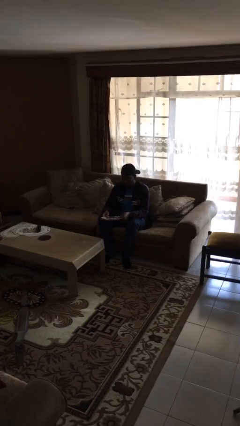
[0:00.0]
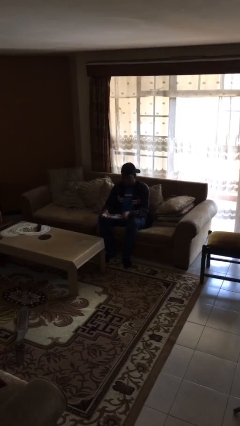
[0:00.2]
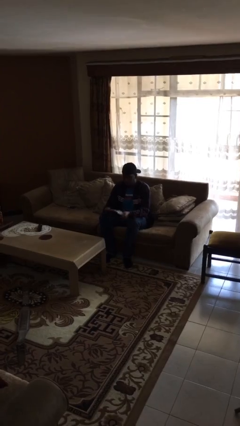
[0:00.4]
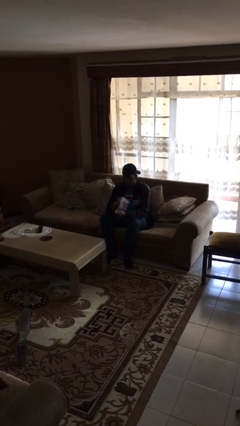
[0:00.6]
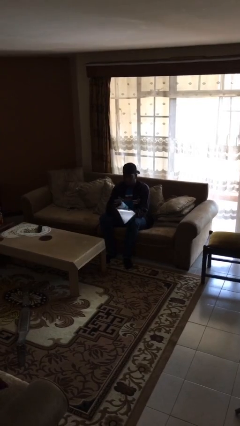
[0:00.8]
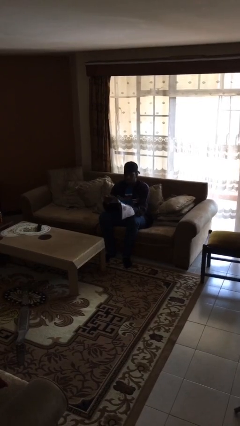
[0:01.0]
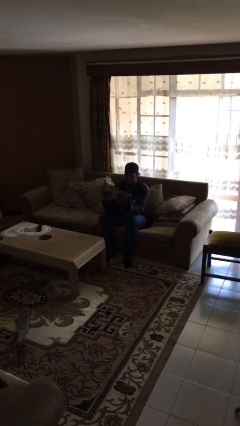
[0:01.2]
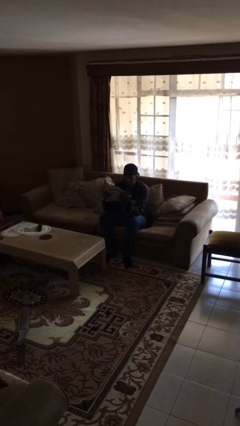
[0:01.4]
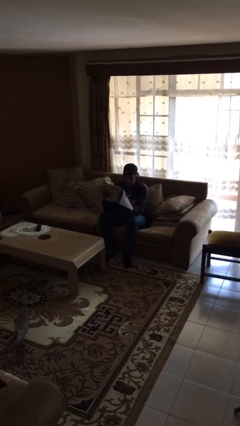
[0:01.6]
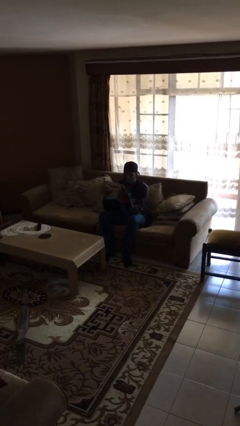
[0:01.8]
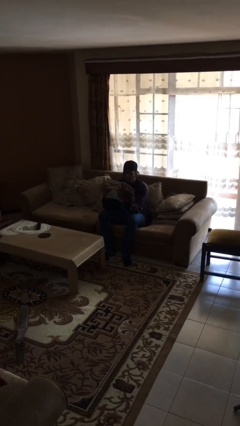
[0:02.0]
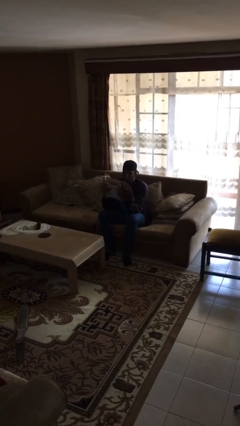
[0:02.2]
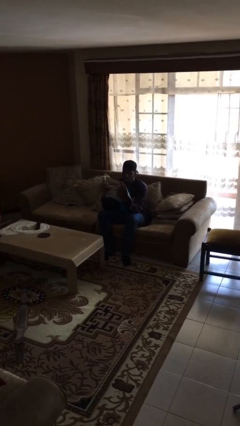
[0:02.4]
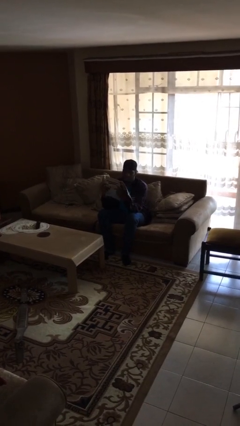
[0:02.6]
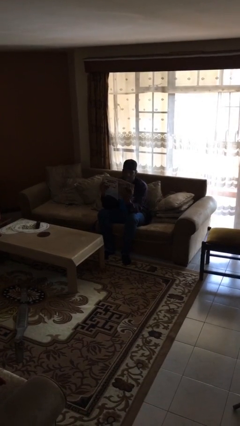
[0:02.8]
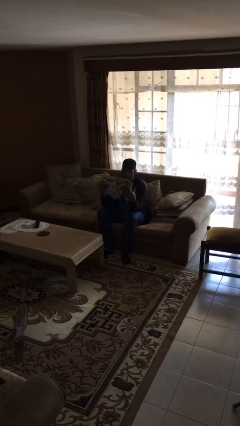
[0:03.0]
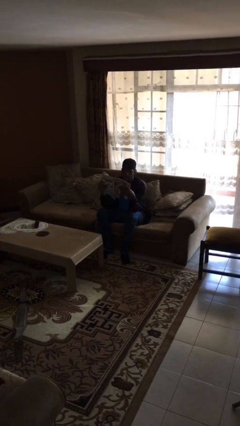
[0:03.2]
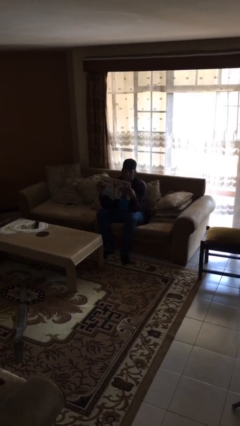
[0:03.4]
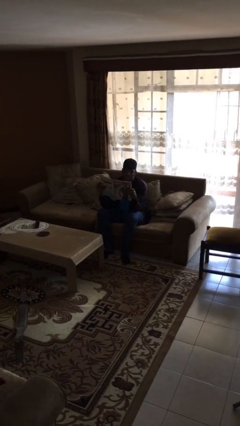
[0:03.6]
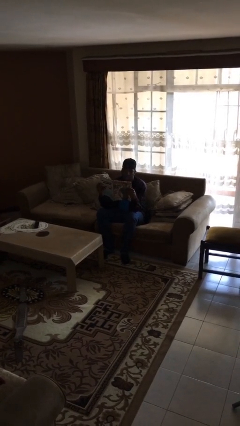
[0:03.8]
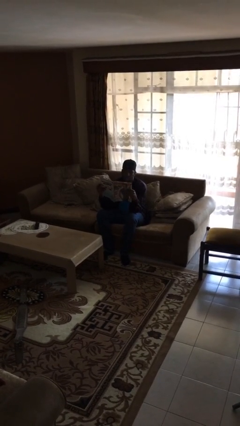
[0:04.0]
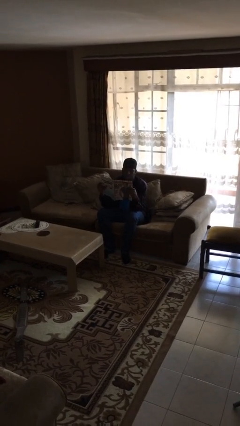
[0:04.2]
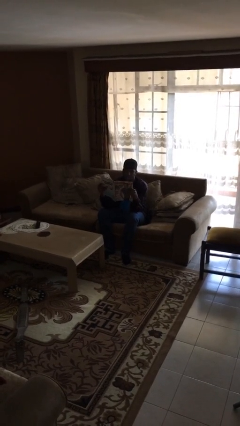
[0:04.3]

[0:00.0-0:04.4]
person reads document

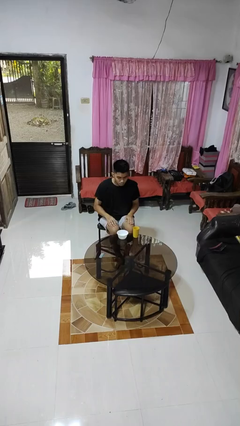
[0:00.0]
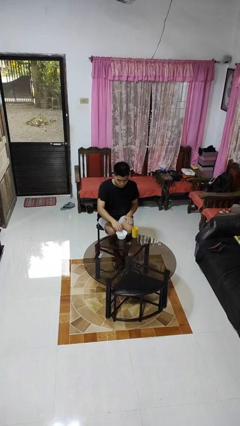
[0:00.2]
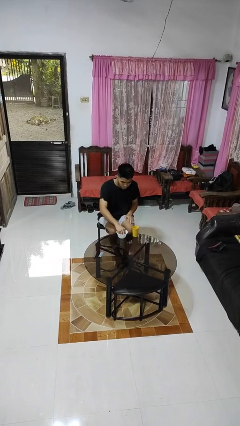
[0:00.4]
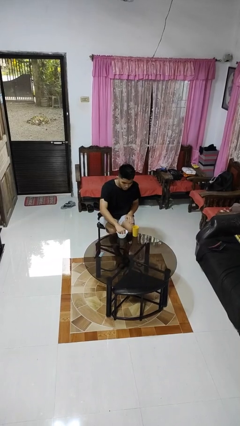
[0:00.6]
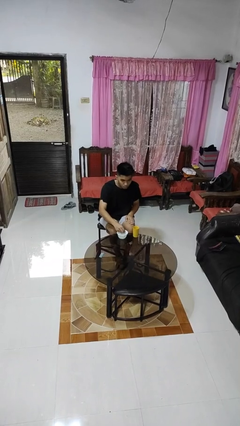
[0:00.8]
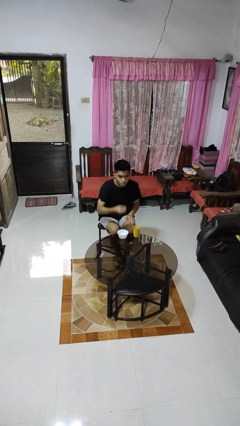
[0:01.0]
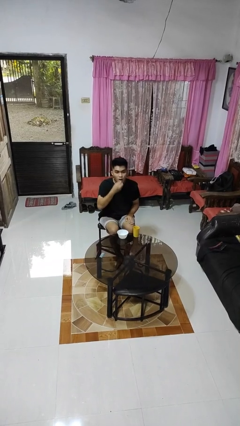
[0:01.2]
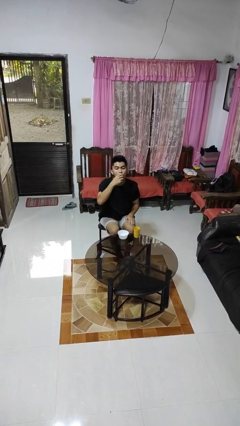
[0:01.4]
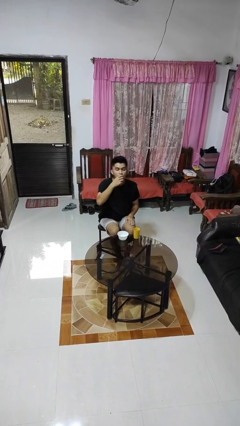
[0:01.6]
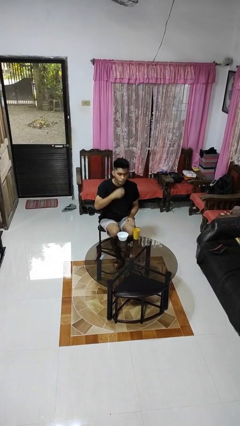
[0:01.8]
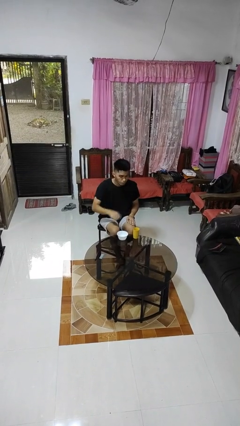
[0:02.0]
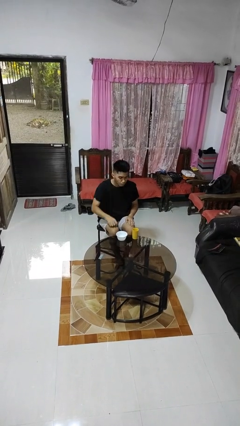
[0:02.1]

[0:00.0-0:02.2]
person takes medicine pills

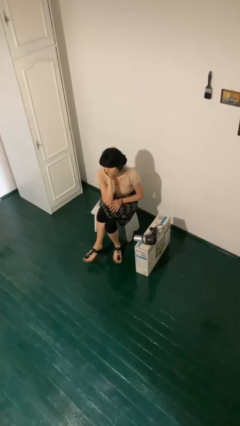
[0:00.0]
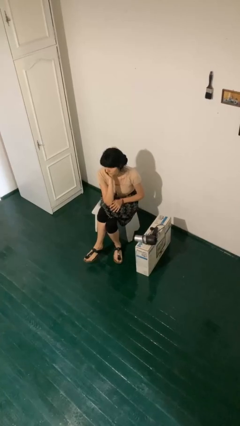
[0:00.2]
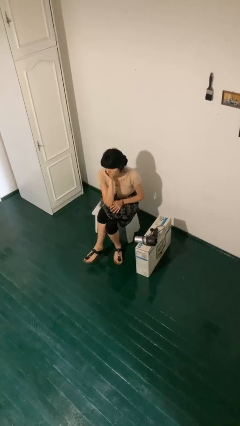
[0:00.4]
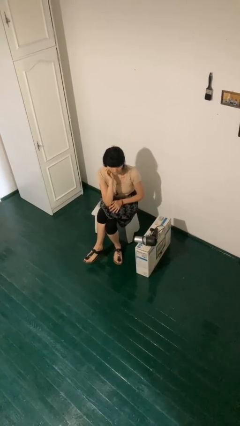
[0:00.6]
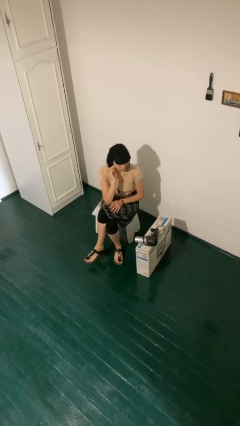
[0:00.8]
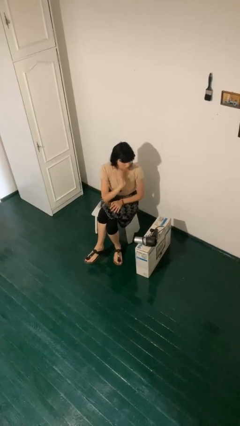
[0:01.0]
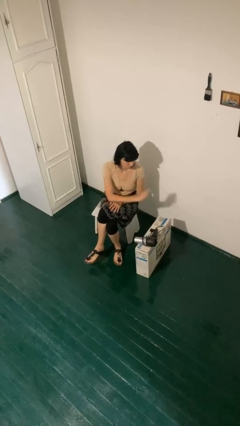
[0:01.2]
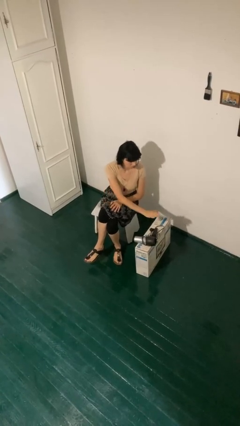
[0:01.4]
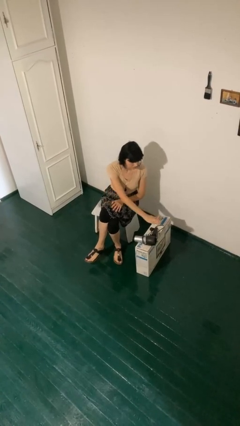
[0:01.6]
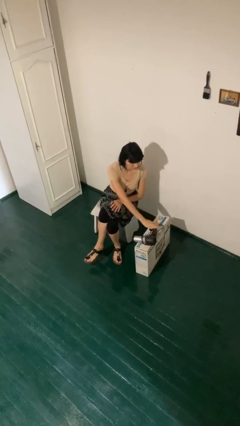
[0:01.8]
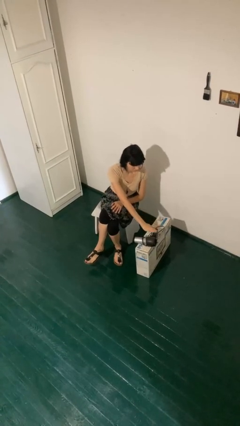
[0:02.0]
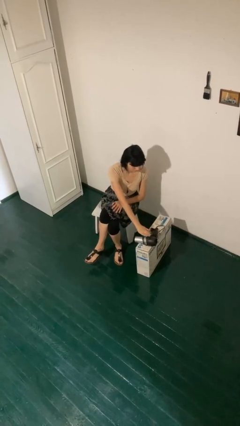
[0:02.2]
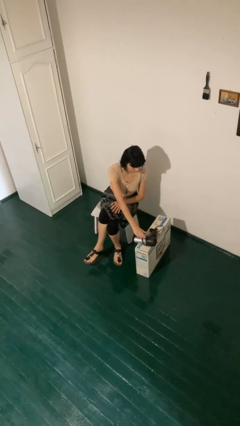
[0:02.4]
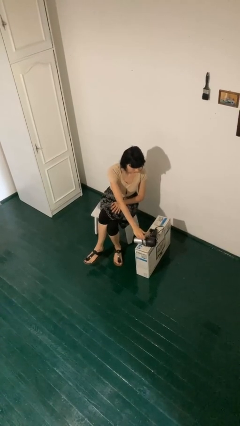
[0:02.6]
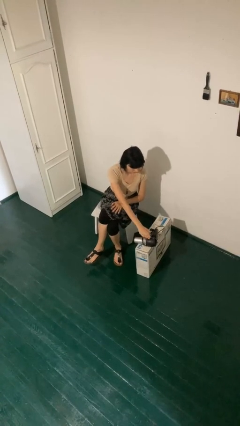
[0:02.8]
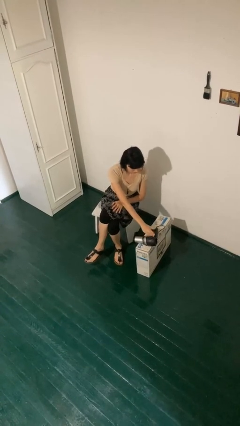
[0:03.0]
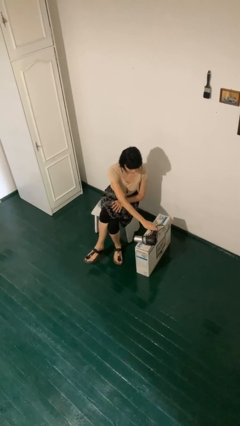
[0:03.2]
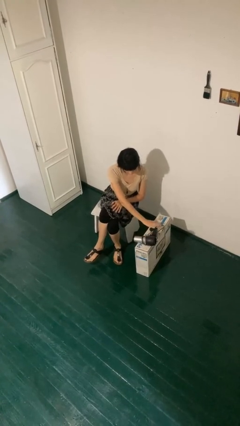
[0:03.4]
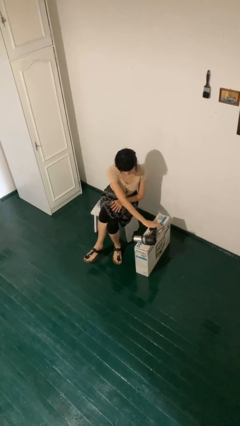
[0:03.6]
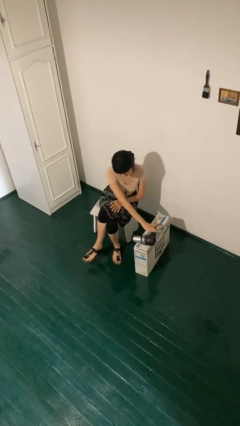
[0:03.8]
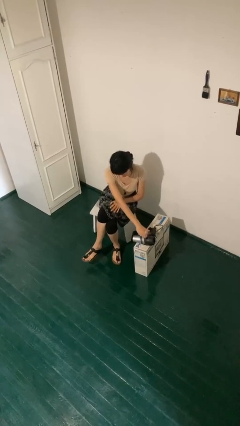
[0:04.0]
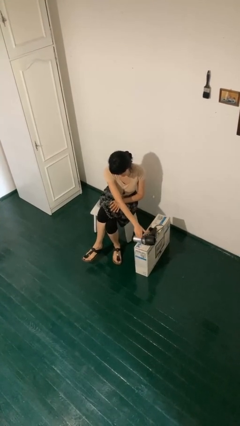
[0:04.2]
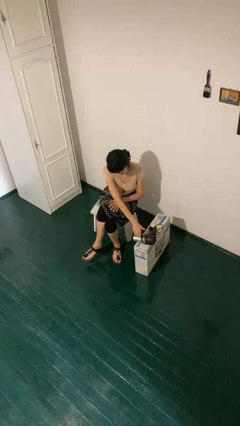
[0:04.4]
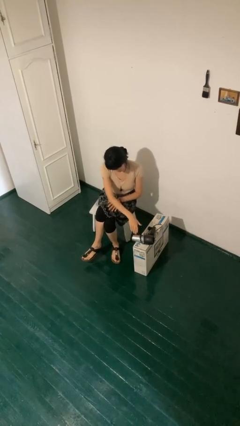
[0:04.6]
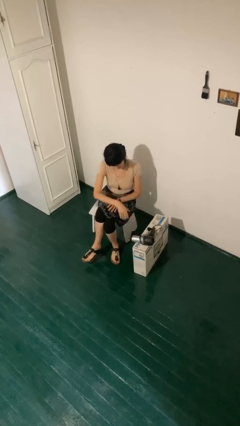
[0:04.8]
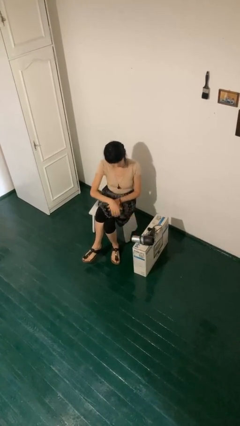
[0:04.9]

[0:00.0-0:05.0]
person waves hand over object

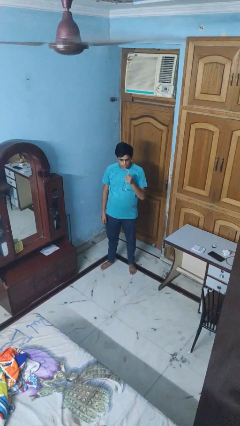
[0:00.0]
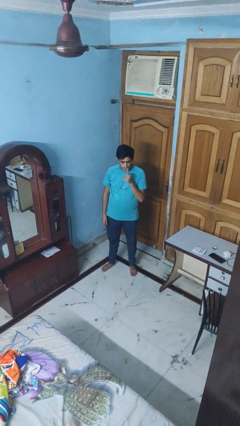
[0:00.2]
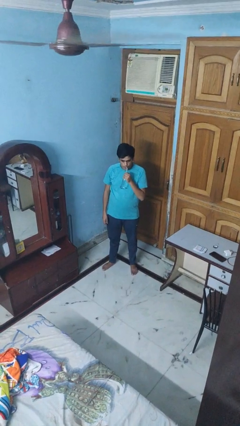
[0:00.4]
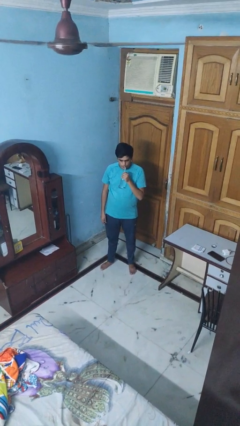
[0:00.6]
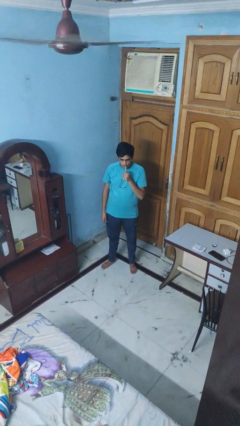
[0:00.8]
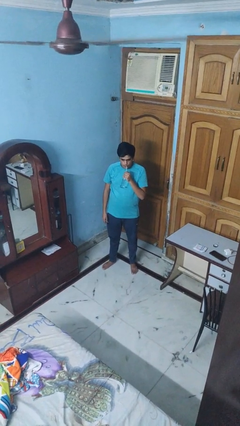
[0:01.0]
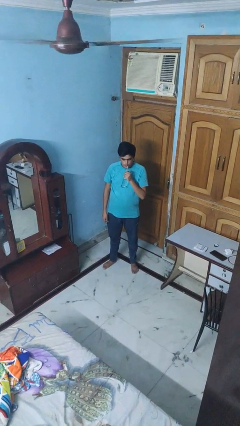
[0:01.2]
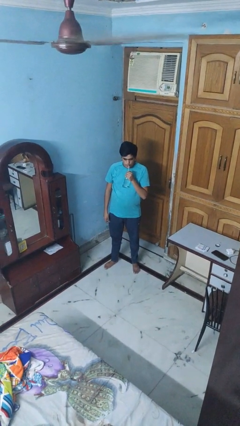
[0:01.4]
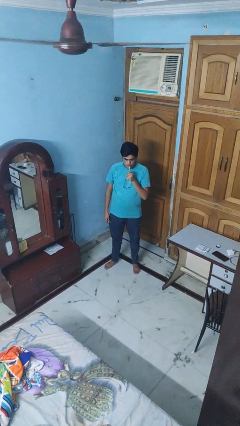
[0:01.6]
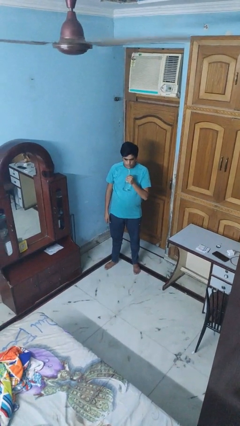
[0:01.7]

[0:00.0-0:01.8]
person drinks from straw

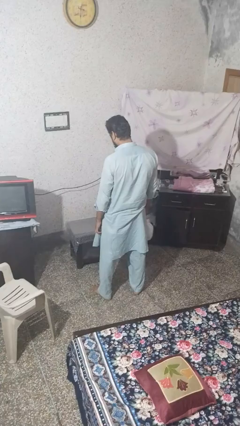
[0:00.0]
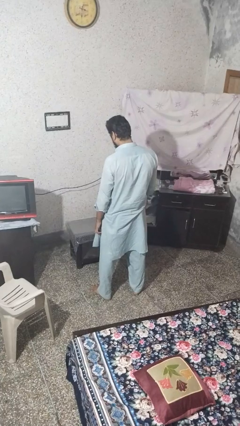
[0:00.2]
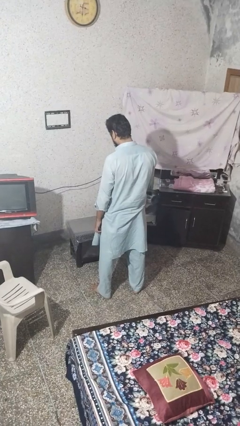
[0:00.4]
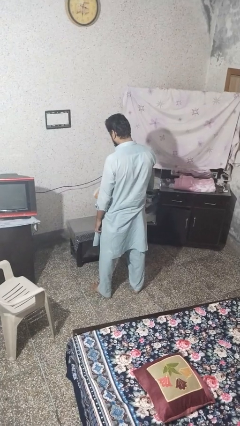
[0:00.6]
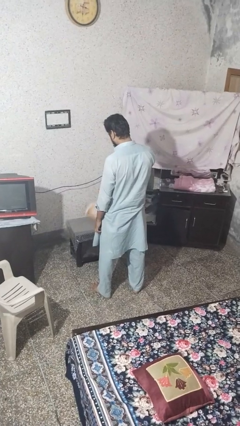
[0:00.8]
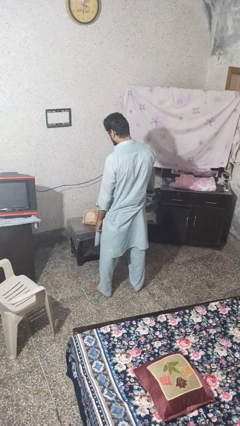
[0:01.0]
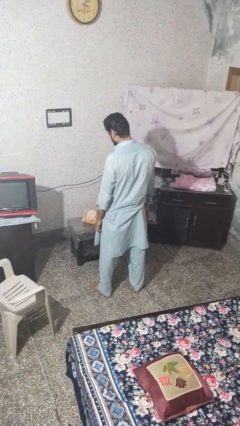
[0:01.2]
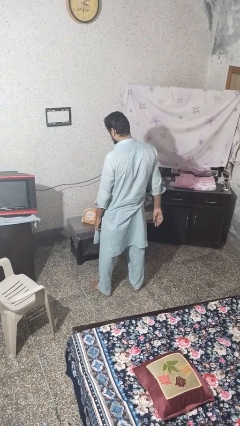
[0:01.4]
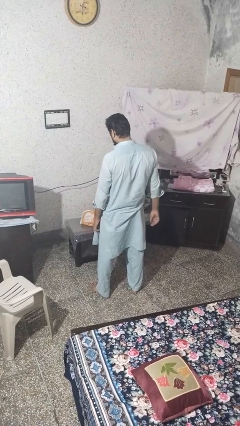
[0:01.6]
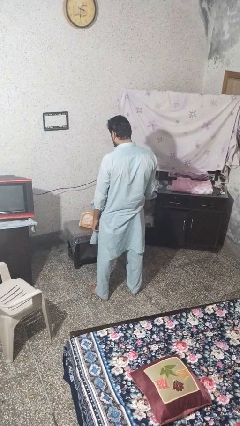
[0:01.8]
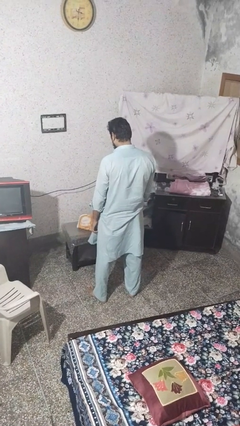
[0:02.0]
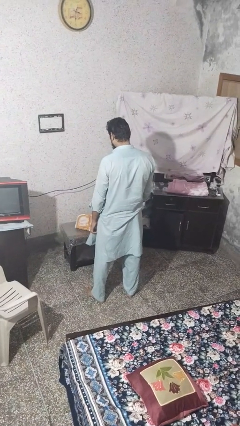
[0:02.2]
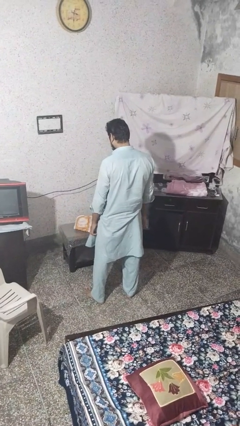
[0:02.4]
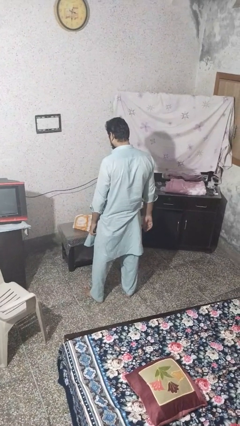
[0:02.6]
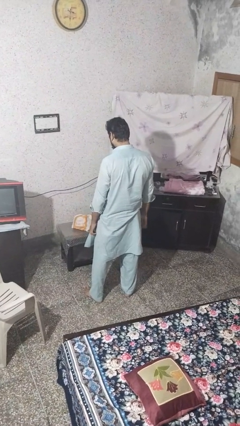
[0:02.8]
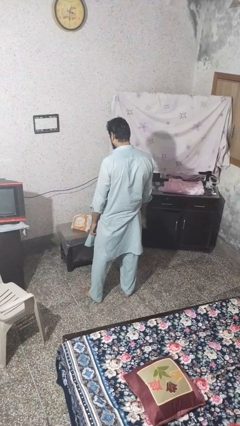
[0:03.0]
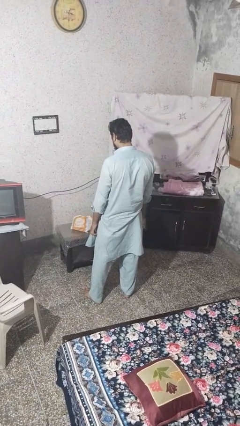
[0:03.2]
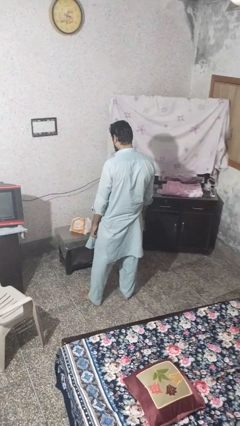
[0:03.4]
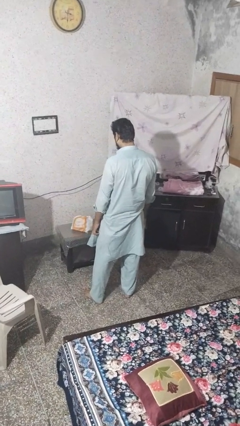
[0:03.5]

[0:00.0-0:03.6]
person throws object on table

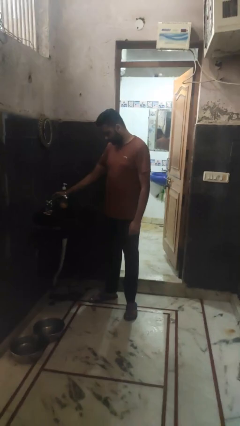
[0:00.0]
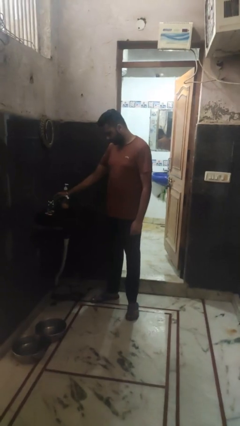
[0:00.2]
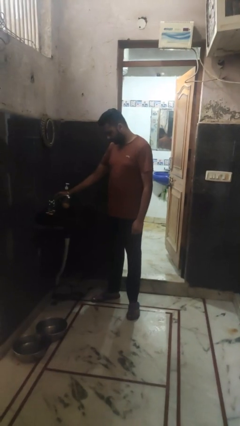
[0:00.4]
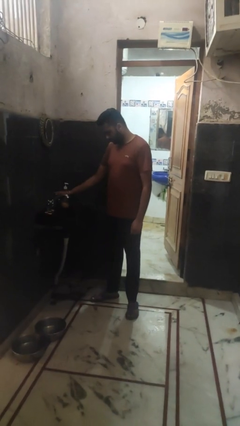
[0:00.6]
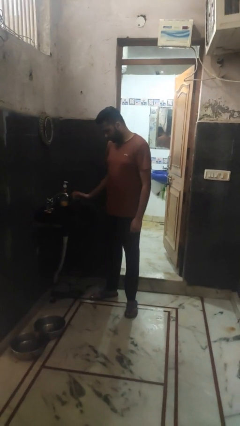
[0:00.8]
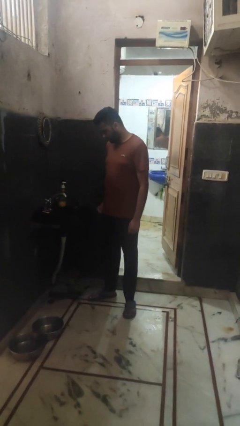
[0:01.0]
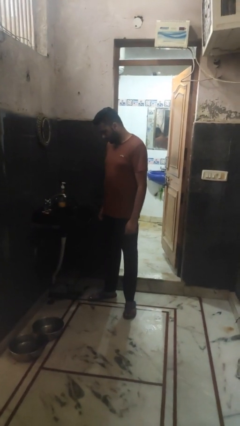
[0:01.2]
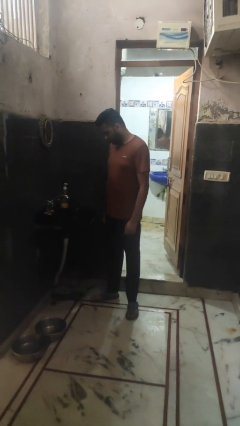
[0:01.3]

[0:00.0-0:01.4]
person turns off faucet
